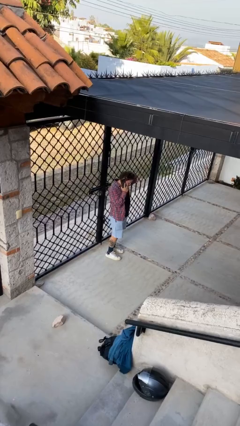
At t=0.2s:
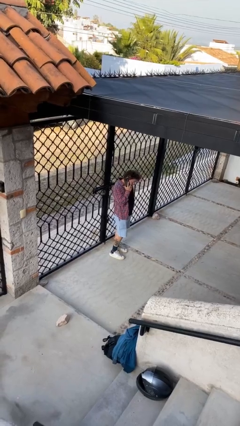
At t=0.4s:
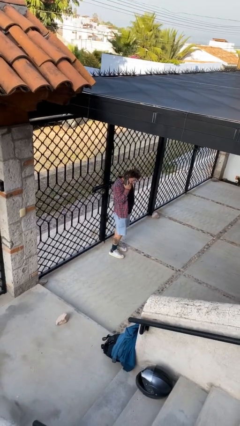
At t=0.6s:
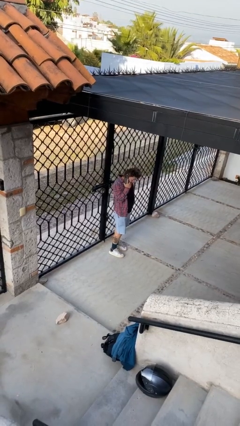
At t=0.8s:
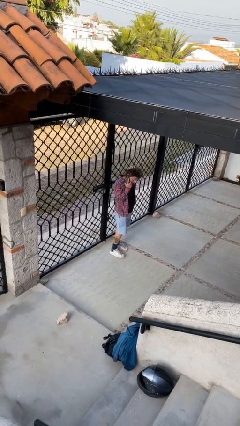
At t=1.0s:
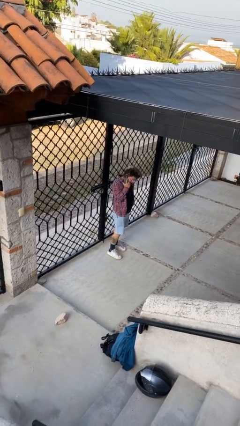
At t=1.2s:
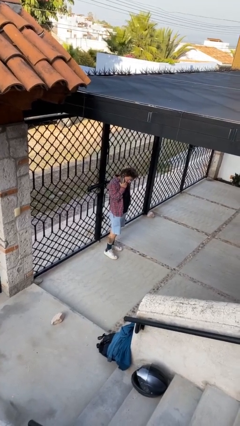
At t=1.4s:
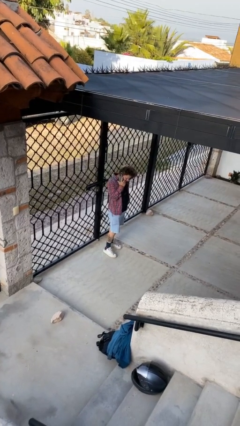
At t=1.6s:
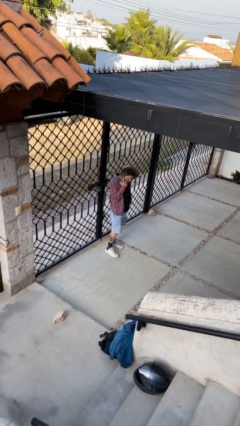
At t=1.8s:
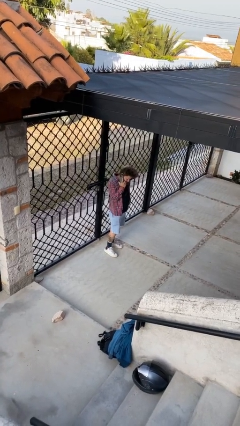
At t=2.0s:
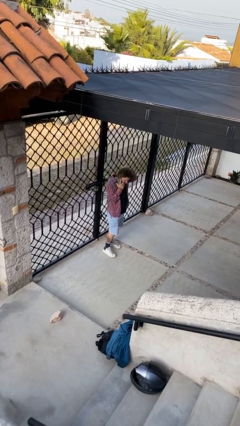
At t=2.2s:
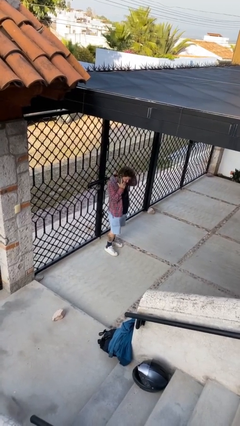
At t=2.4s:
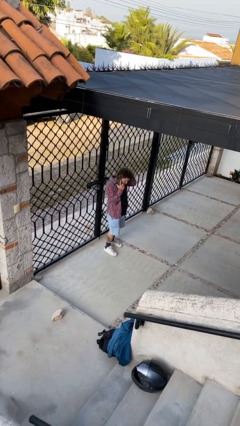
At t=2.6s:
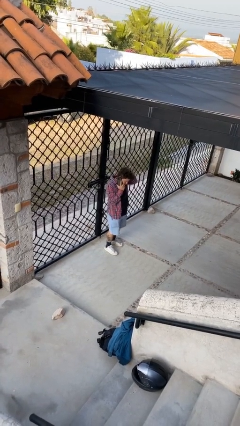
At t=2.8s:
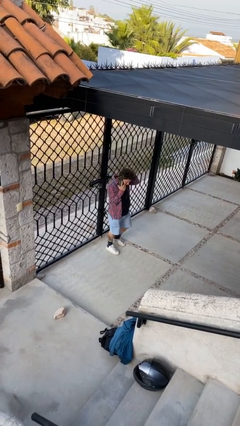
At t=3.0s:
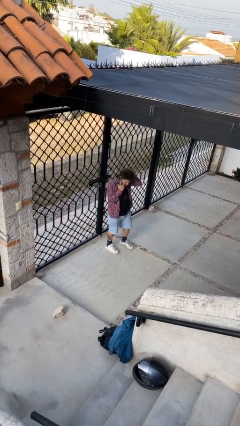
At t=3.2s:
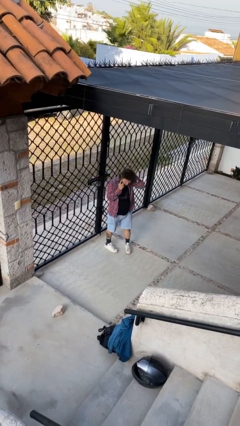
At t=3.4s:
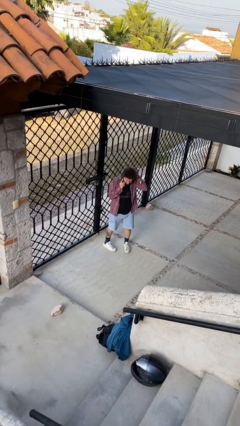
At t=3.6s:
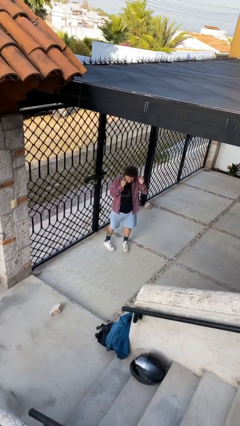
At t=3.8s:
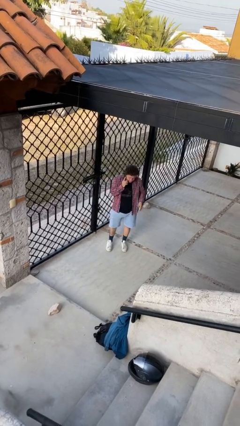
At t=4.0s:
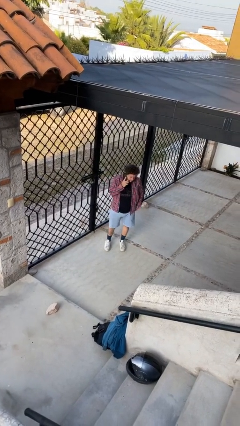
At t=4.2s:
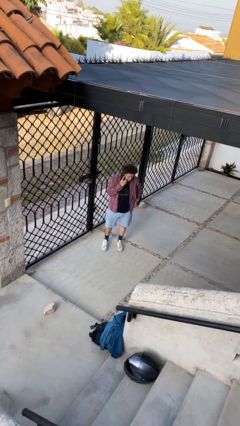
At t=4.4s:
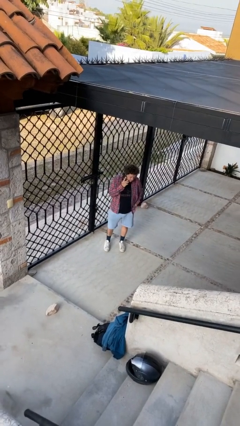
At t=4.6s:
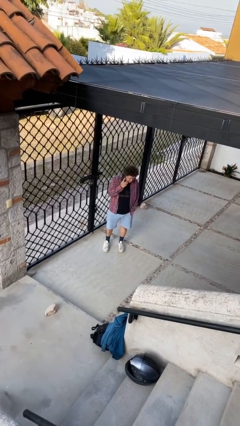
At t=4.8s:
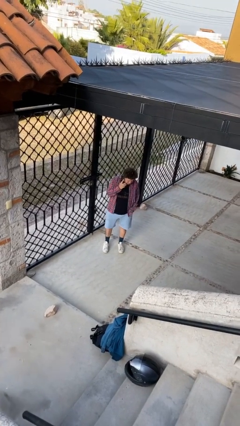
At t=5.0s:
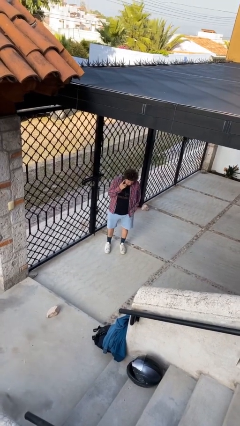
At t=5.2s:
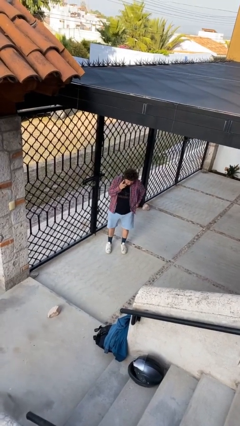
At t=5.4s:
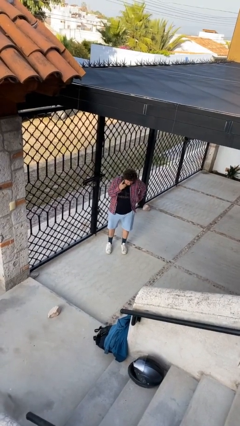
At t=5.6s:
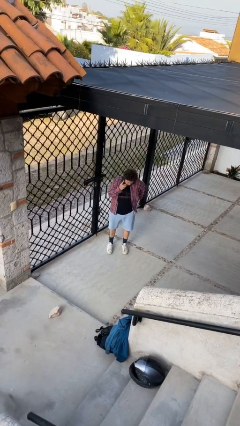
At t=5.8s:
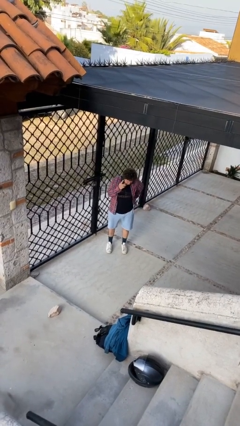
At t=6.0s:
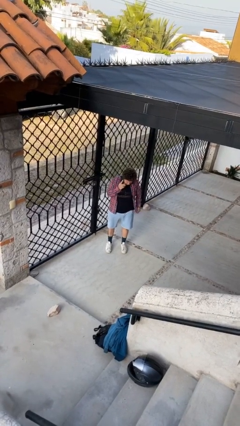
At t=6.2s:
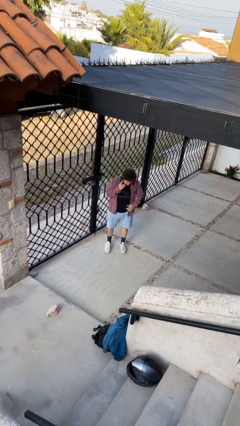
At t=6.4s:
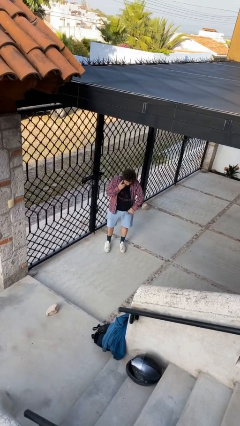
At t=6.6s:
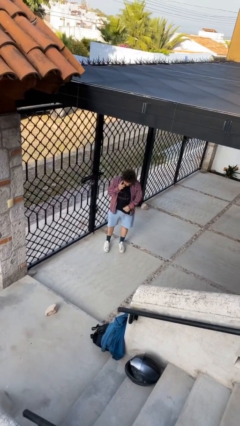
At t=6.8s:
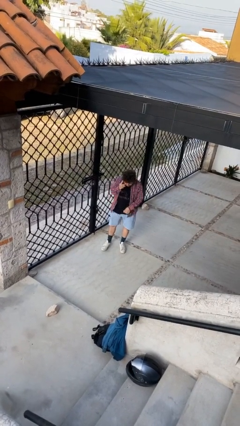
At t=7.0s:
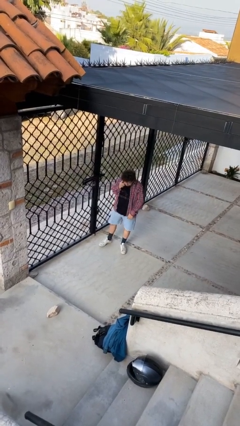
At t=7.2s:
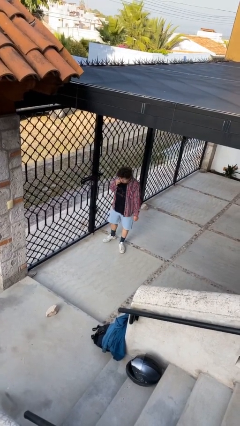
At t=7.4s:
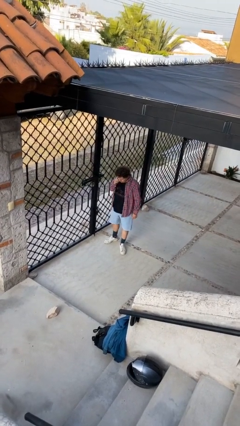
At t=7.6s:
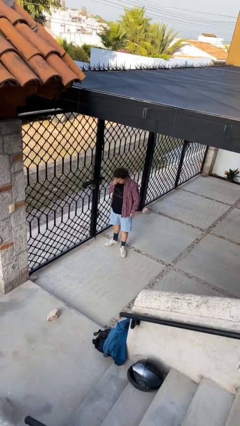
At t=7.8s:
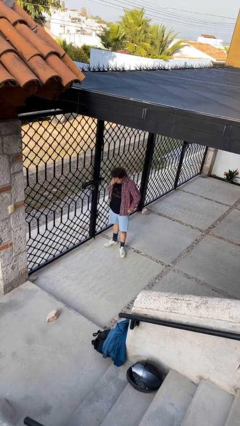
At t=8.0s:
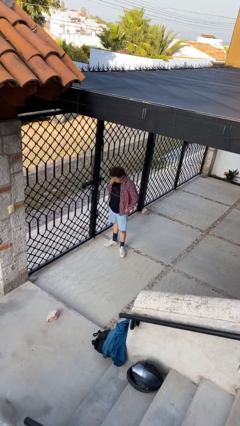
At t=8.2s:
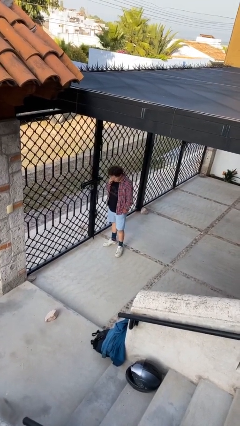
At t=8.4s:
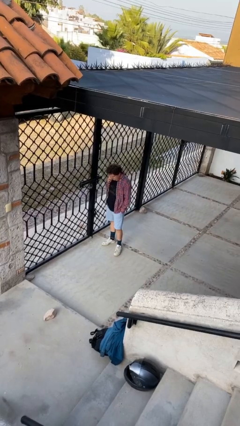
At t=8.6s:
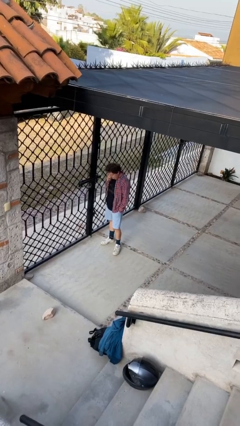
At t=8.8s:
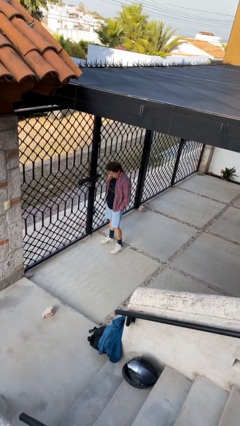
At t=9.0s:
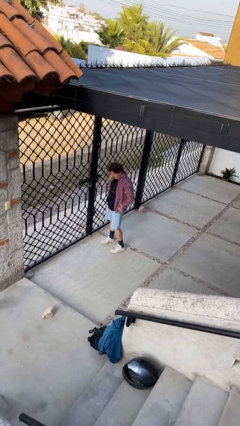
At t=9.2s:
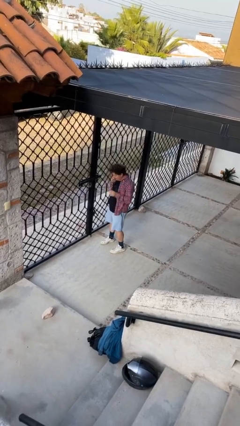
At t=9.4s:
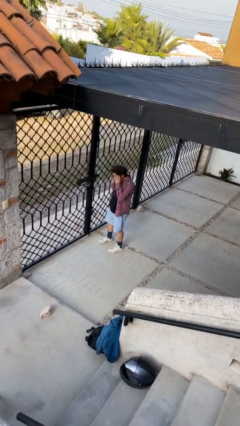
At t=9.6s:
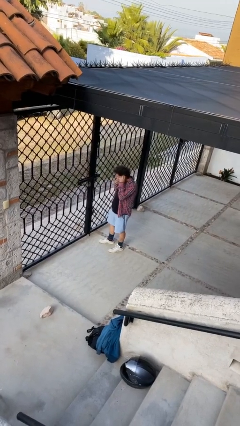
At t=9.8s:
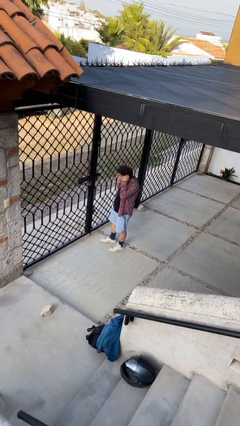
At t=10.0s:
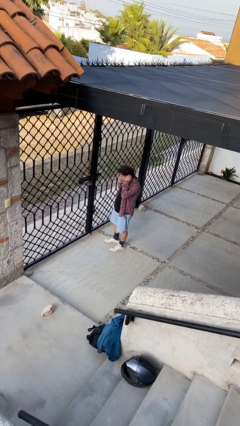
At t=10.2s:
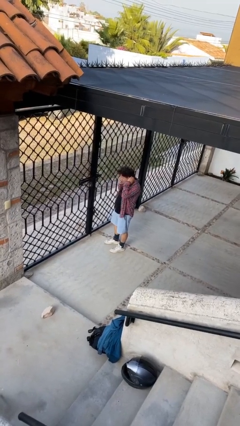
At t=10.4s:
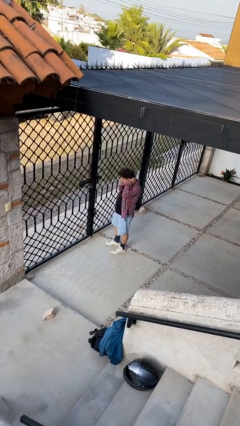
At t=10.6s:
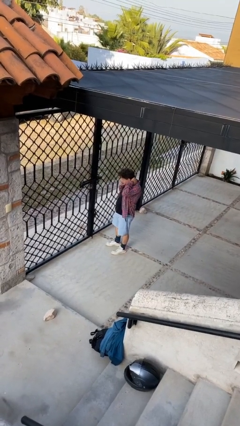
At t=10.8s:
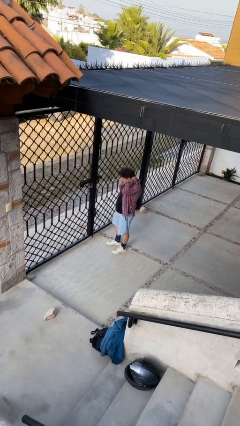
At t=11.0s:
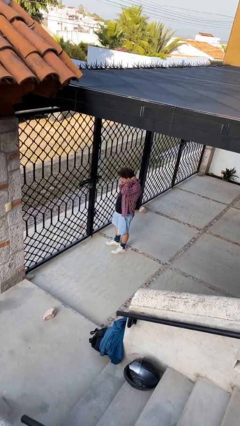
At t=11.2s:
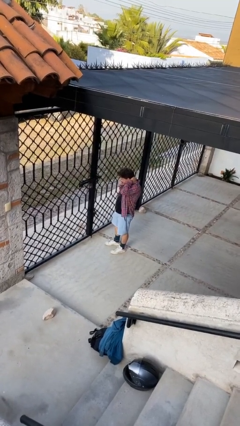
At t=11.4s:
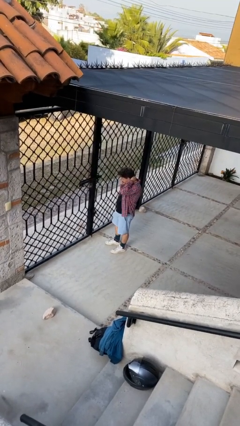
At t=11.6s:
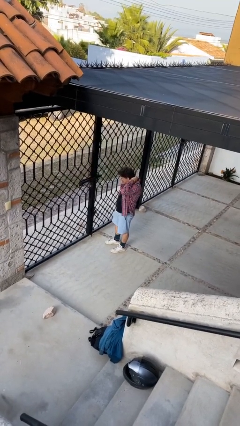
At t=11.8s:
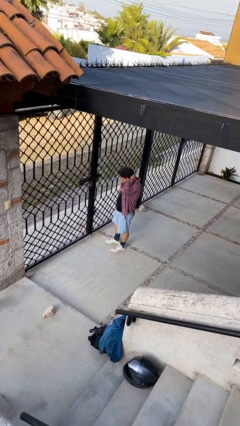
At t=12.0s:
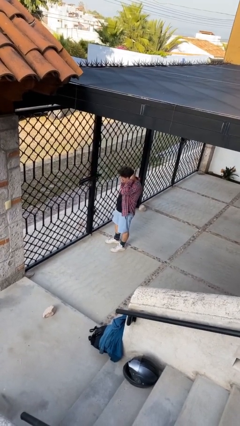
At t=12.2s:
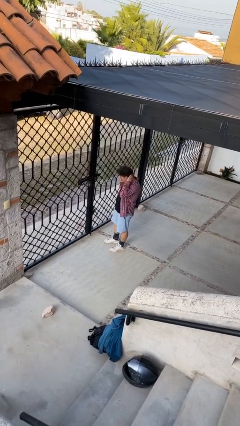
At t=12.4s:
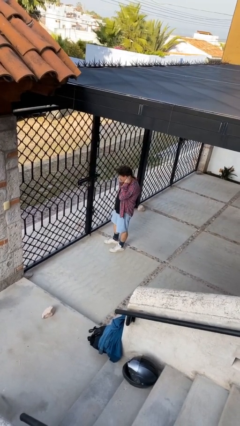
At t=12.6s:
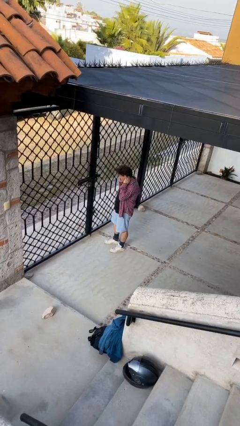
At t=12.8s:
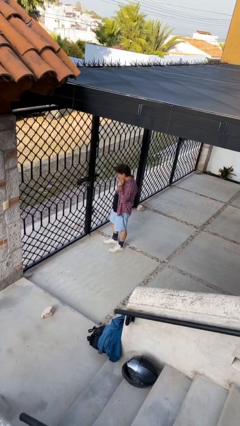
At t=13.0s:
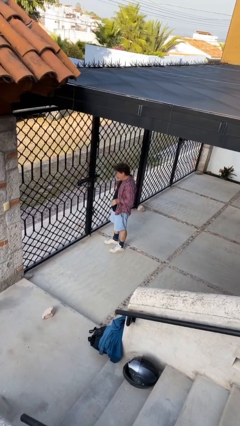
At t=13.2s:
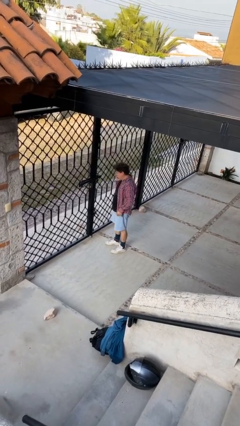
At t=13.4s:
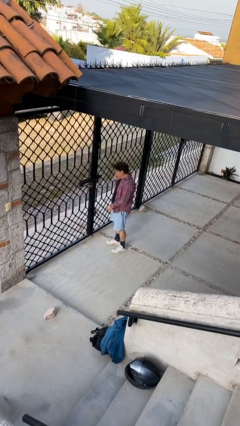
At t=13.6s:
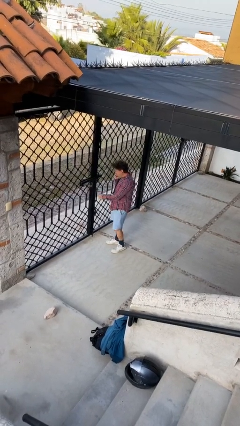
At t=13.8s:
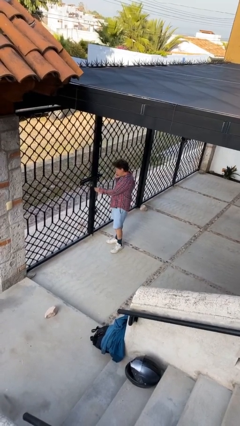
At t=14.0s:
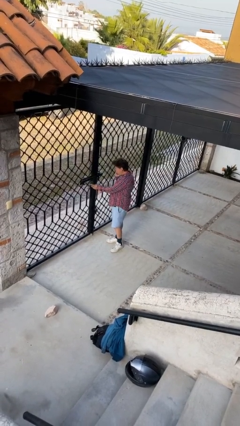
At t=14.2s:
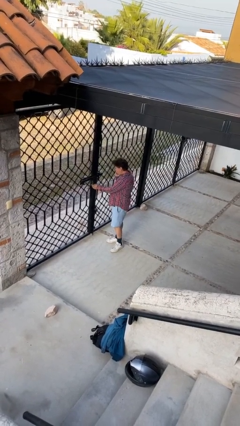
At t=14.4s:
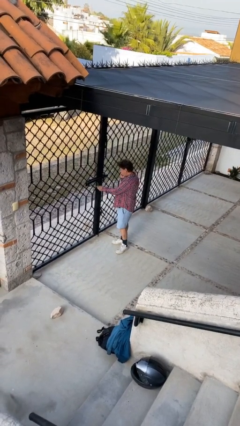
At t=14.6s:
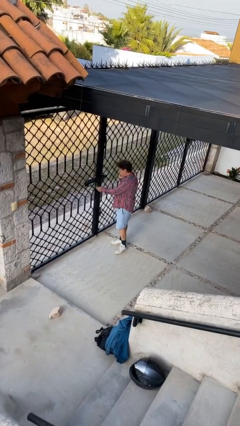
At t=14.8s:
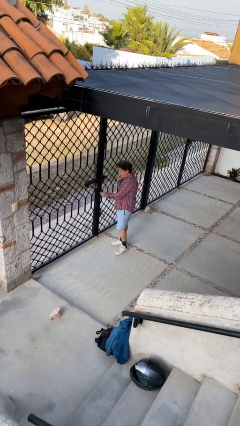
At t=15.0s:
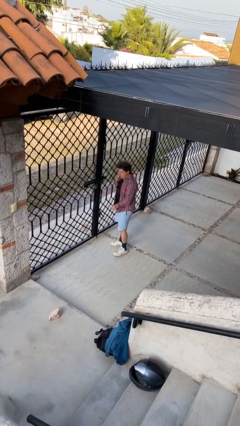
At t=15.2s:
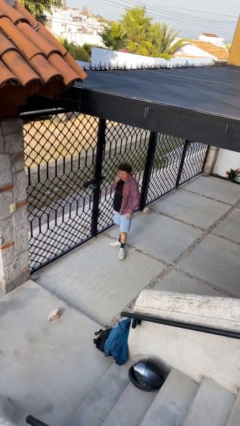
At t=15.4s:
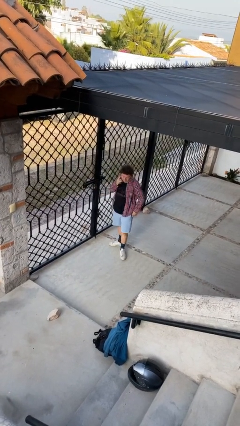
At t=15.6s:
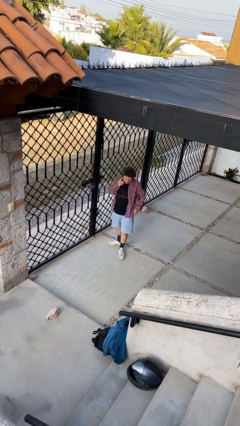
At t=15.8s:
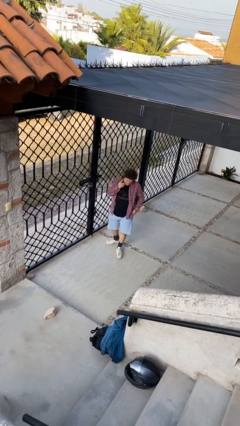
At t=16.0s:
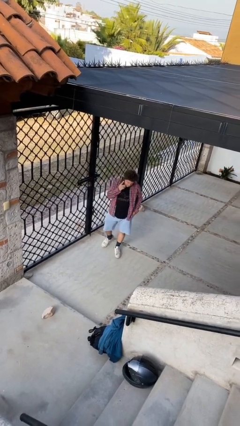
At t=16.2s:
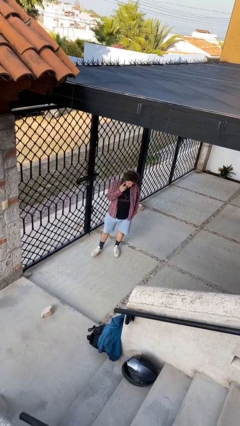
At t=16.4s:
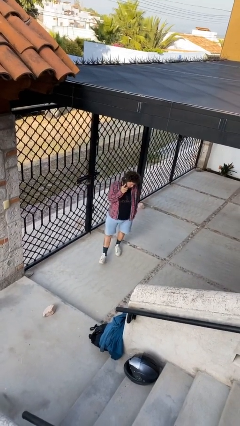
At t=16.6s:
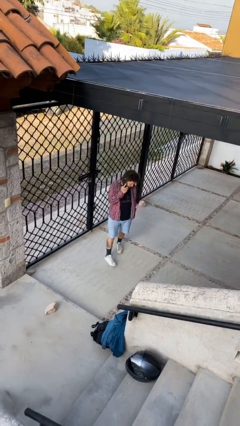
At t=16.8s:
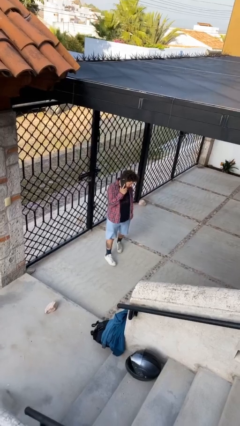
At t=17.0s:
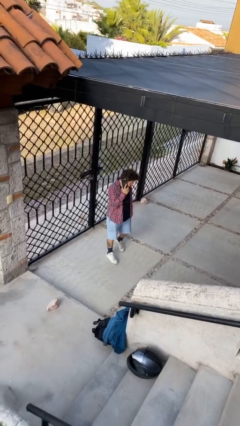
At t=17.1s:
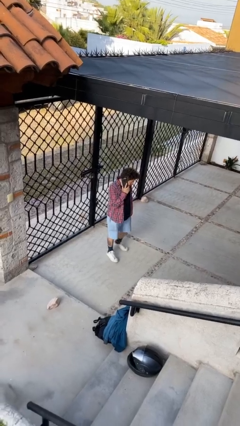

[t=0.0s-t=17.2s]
person talks on phone

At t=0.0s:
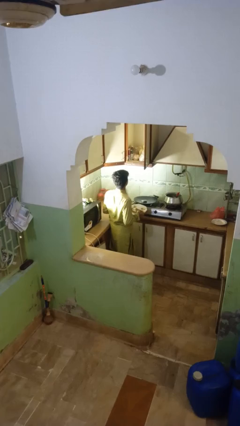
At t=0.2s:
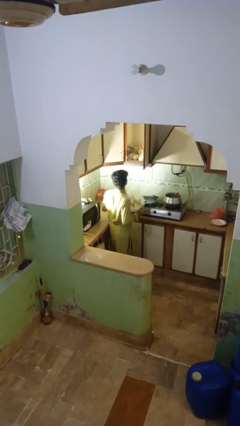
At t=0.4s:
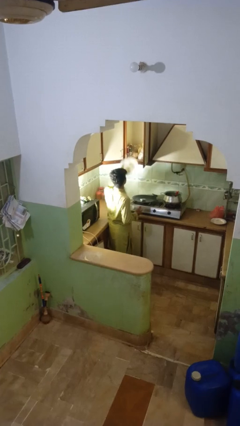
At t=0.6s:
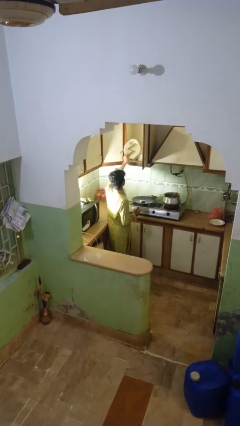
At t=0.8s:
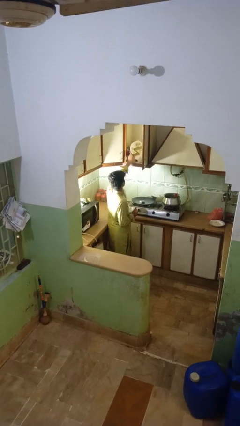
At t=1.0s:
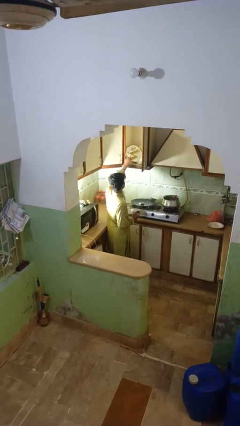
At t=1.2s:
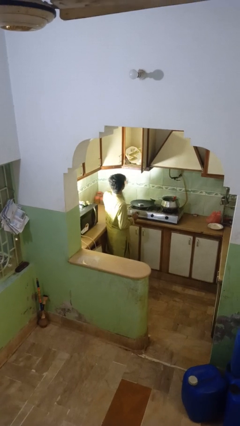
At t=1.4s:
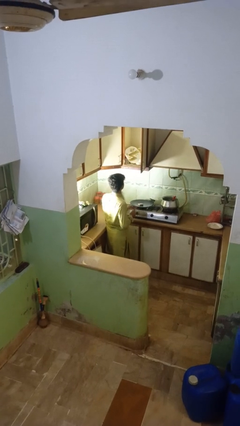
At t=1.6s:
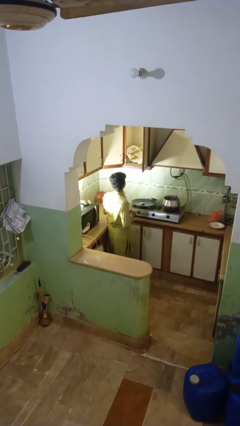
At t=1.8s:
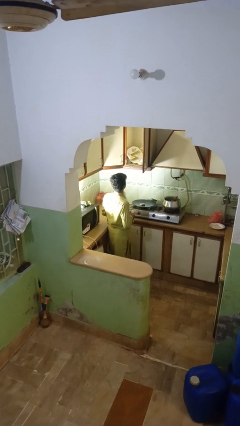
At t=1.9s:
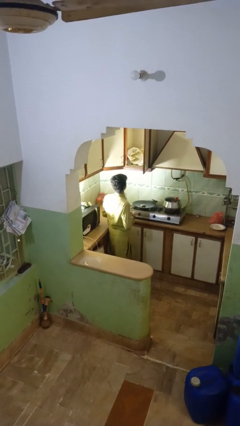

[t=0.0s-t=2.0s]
person puts object in cabinet
